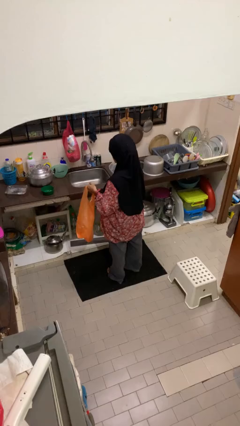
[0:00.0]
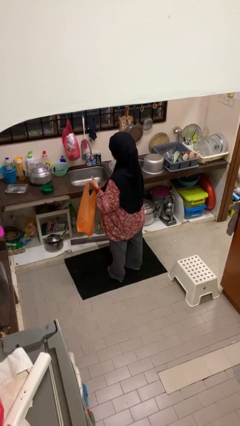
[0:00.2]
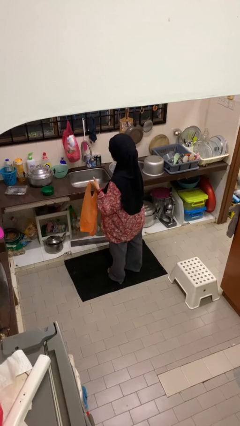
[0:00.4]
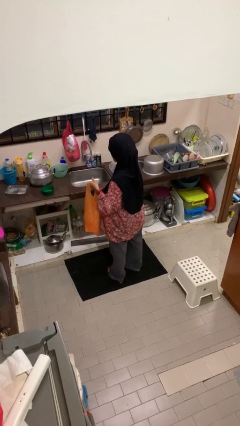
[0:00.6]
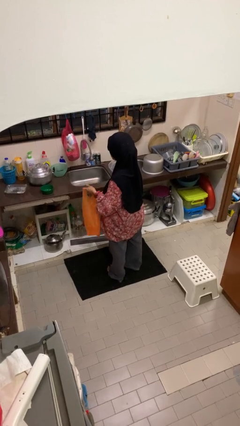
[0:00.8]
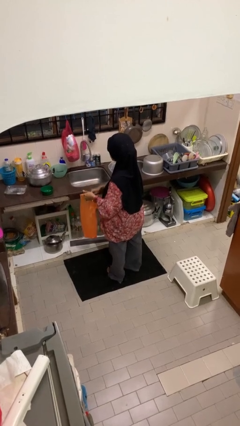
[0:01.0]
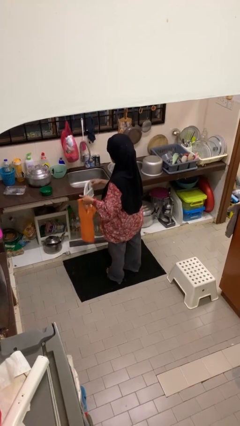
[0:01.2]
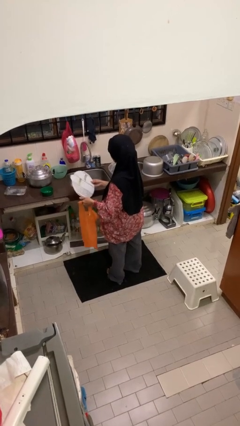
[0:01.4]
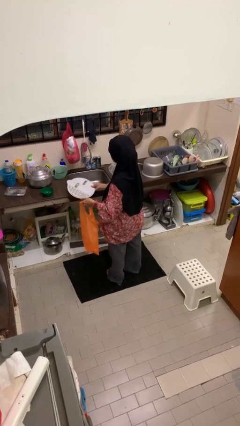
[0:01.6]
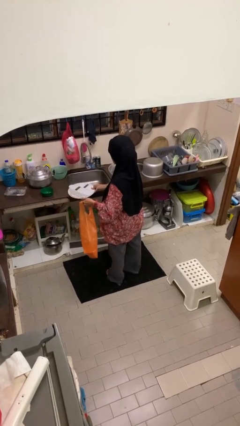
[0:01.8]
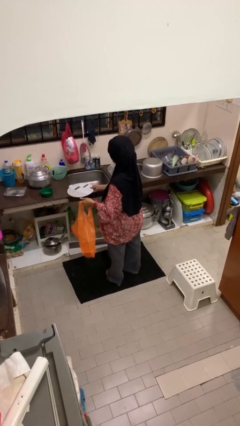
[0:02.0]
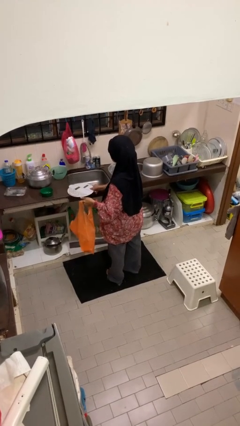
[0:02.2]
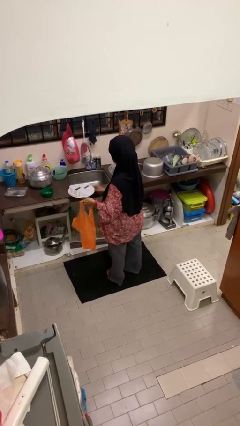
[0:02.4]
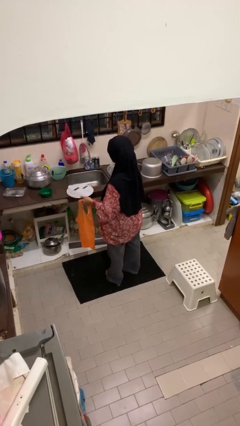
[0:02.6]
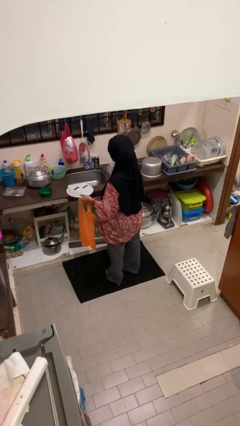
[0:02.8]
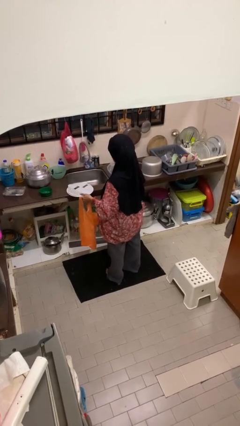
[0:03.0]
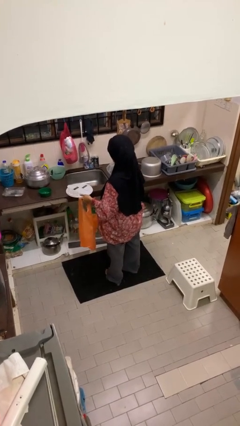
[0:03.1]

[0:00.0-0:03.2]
person takes object from bag

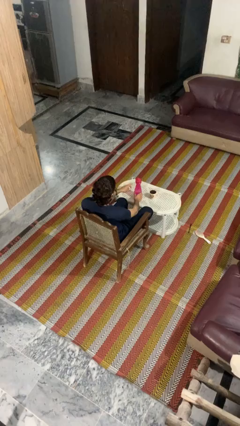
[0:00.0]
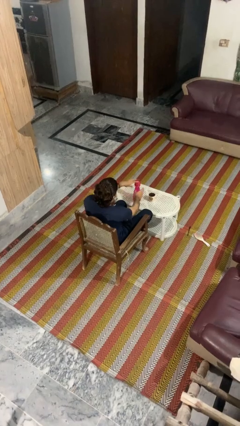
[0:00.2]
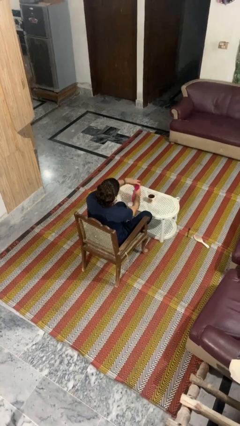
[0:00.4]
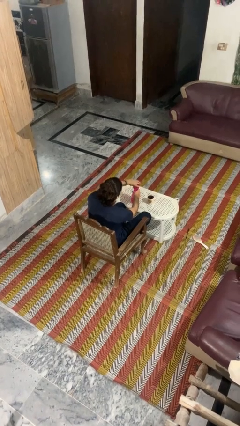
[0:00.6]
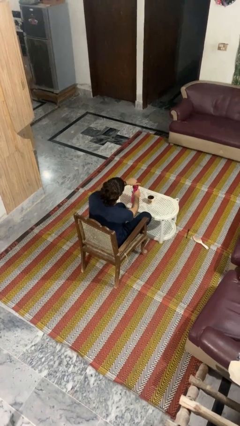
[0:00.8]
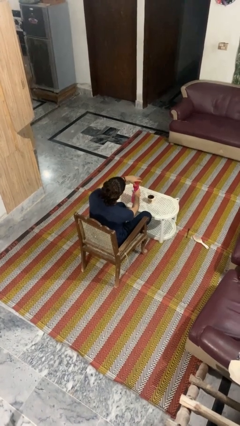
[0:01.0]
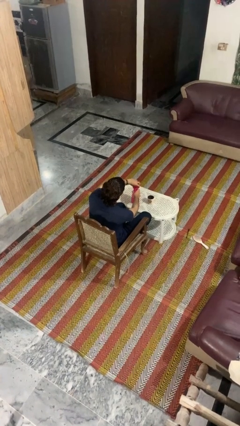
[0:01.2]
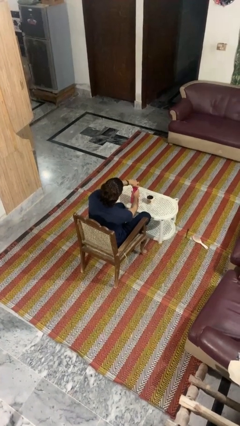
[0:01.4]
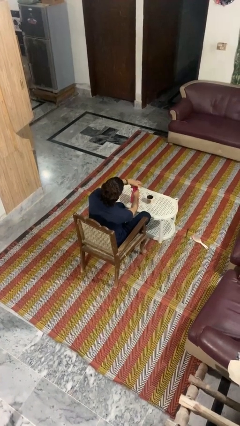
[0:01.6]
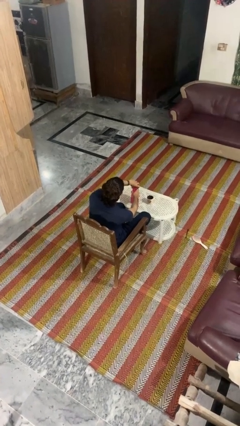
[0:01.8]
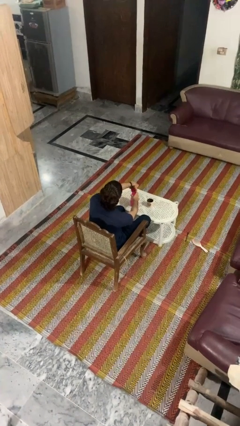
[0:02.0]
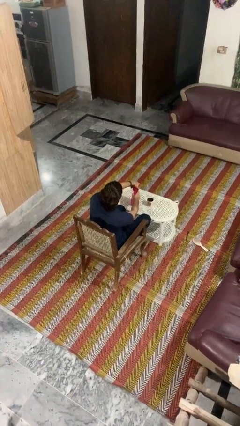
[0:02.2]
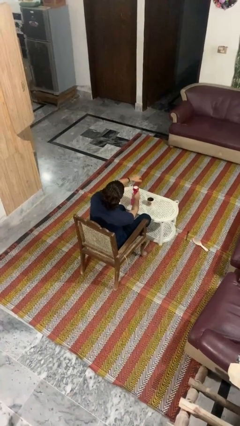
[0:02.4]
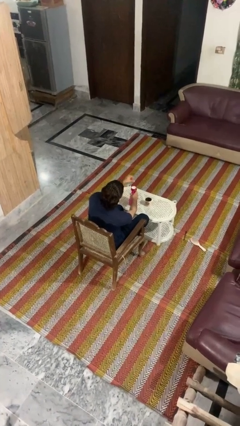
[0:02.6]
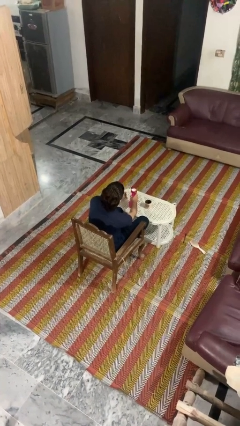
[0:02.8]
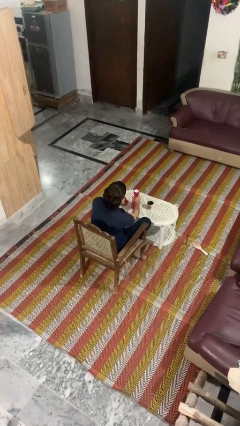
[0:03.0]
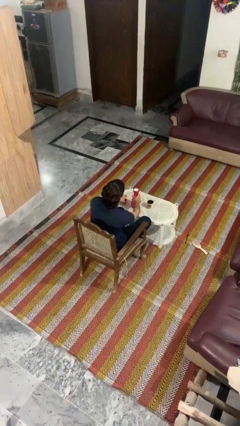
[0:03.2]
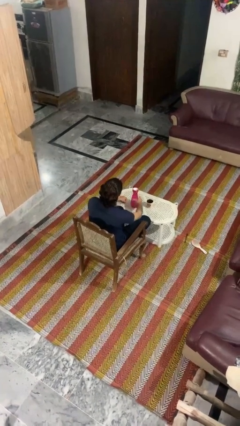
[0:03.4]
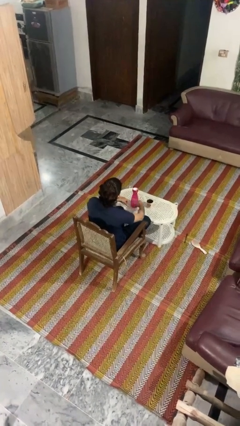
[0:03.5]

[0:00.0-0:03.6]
person unscrews lid from bottle

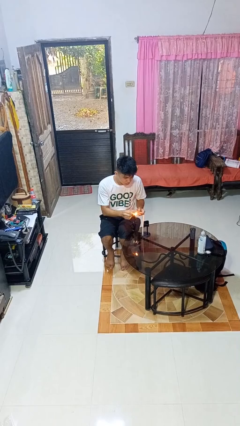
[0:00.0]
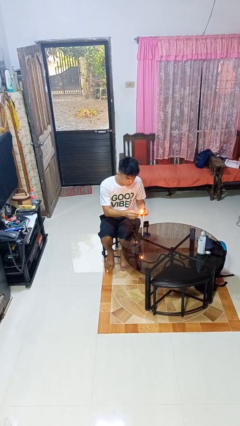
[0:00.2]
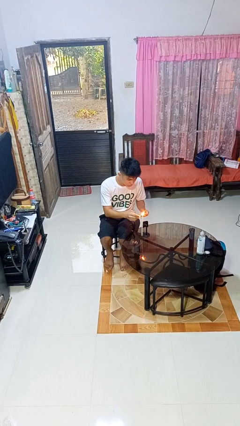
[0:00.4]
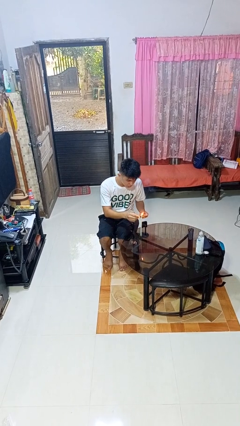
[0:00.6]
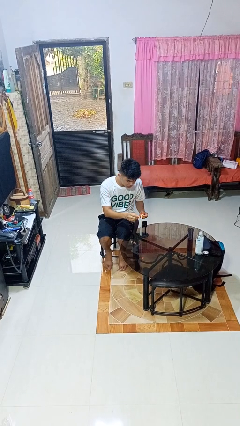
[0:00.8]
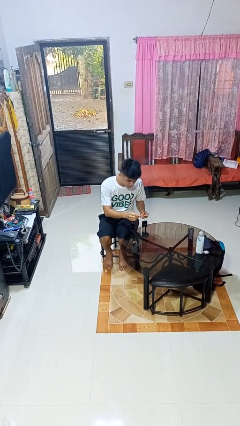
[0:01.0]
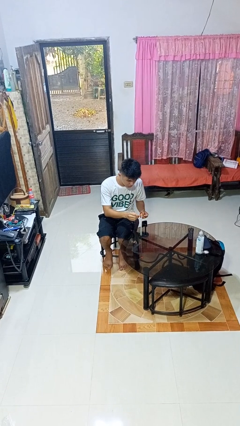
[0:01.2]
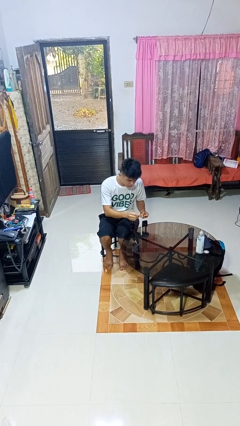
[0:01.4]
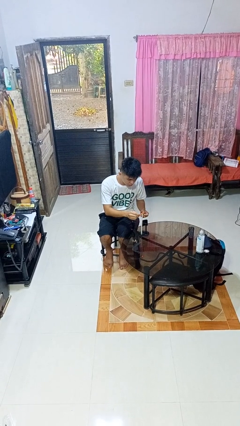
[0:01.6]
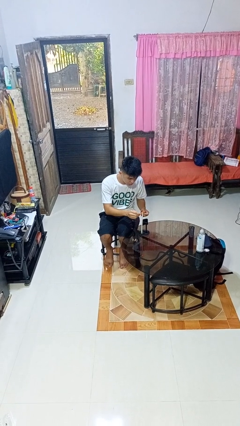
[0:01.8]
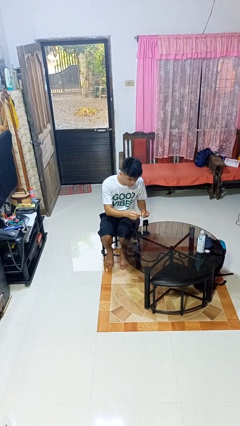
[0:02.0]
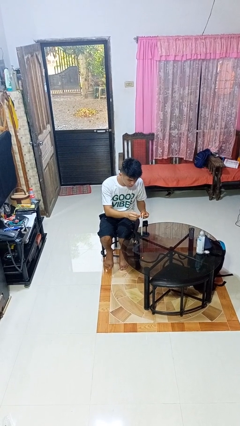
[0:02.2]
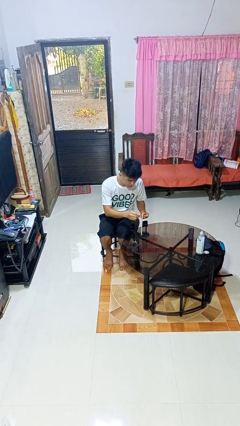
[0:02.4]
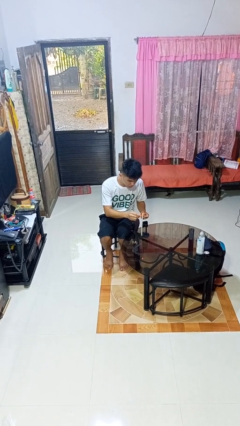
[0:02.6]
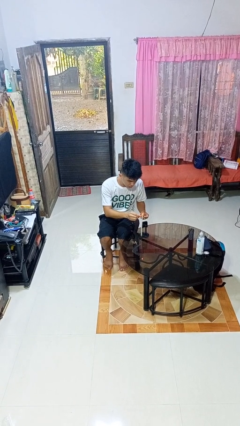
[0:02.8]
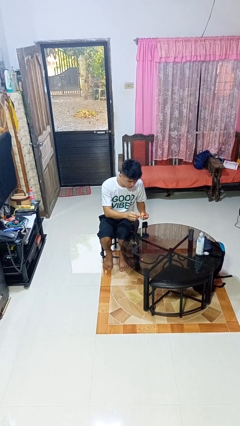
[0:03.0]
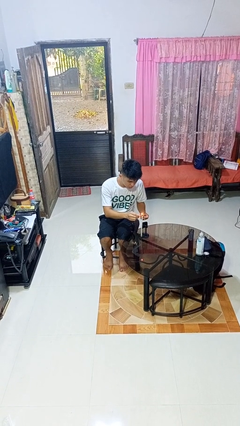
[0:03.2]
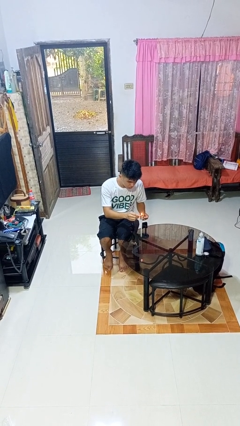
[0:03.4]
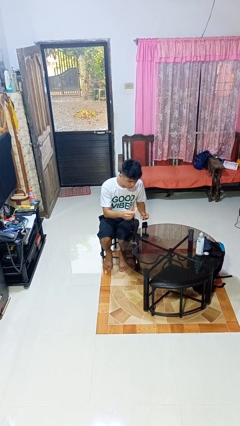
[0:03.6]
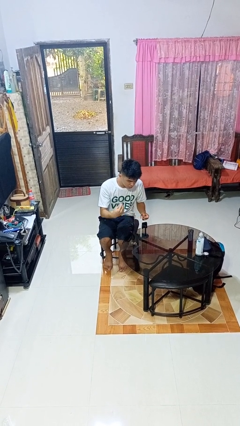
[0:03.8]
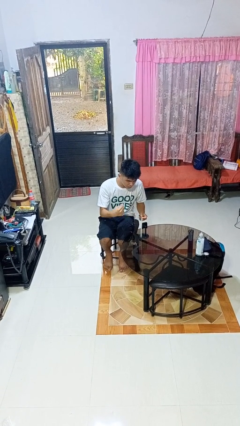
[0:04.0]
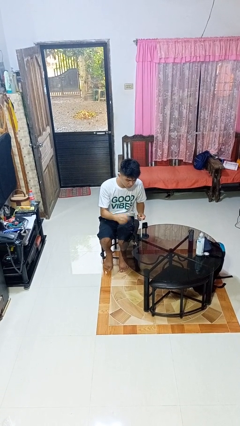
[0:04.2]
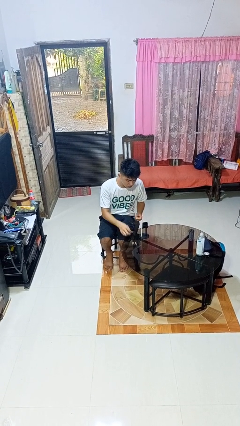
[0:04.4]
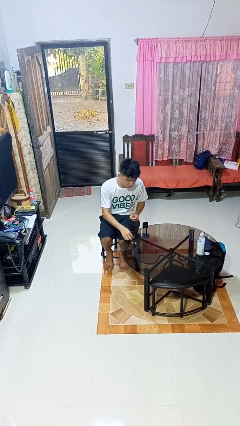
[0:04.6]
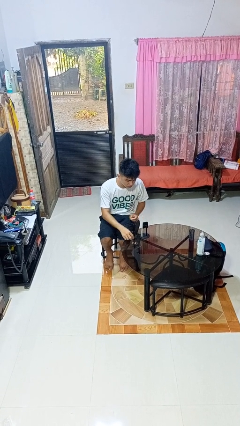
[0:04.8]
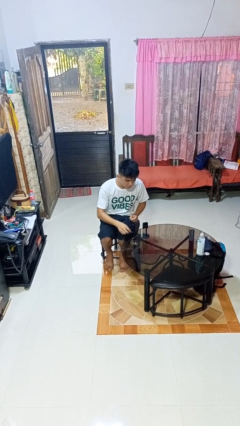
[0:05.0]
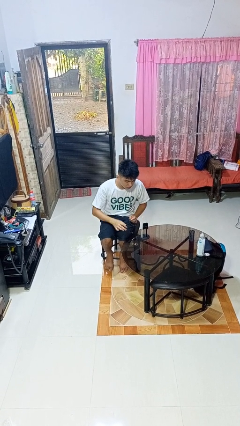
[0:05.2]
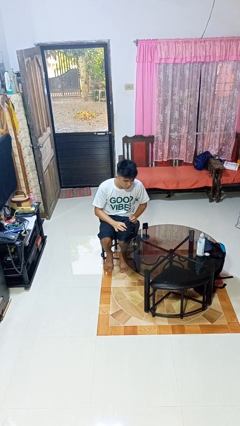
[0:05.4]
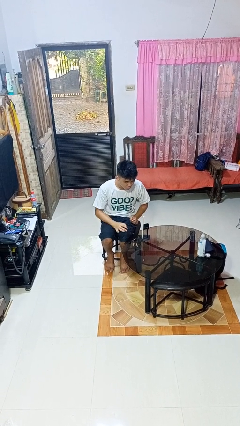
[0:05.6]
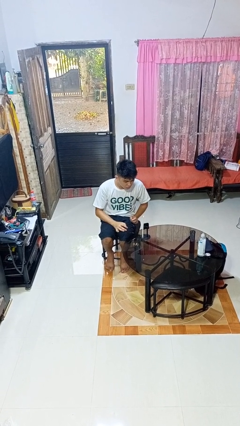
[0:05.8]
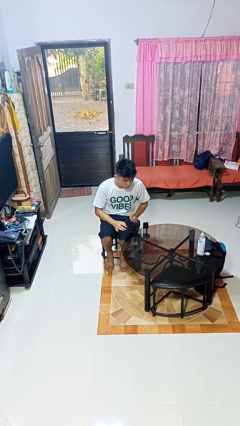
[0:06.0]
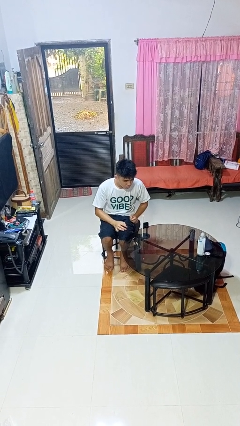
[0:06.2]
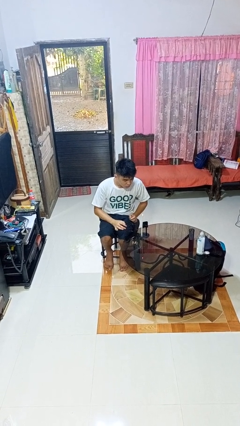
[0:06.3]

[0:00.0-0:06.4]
person lights candle

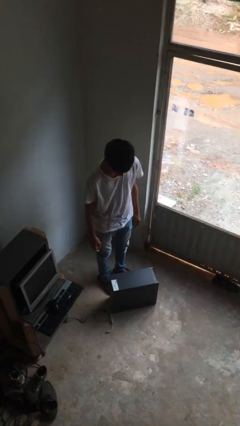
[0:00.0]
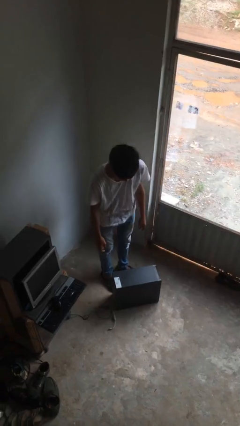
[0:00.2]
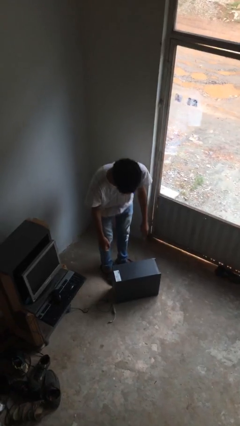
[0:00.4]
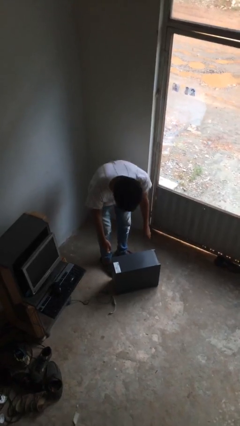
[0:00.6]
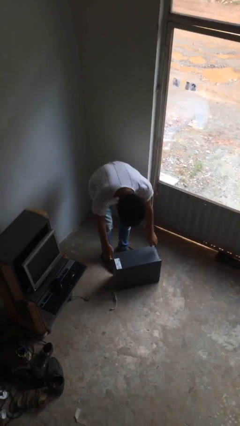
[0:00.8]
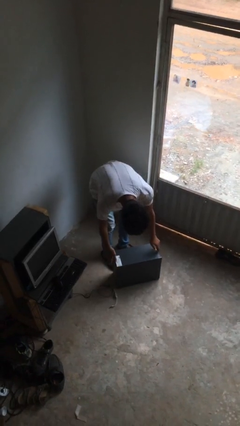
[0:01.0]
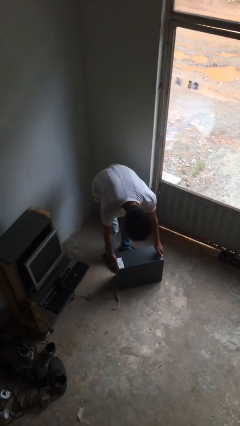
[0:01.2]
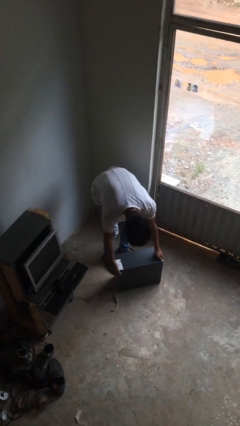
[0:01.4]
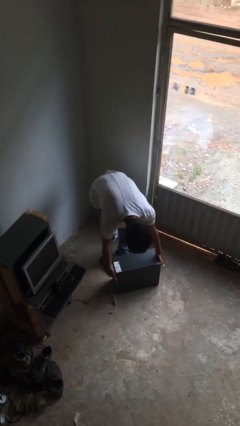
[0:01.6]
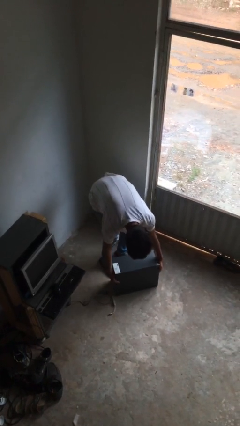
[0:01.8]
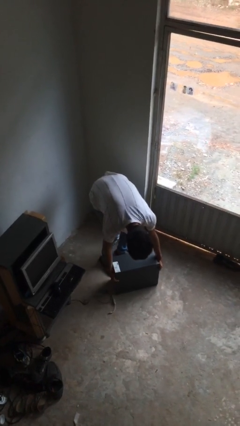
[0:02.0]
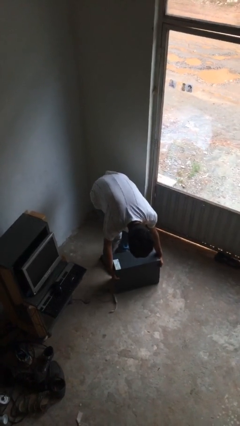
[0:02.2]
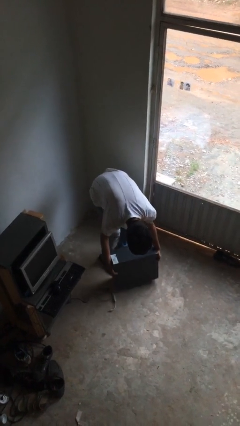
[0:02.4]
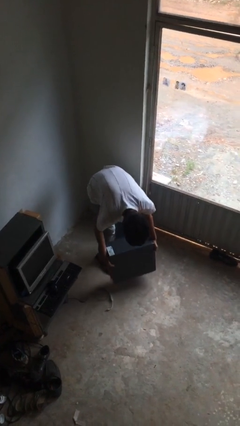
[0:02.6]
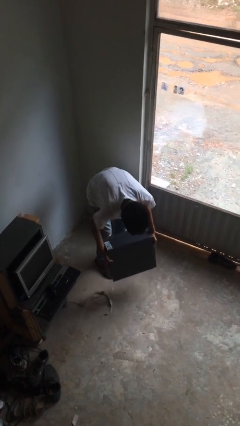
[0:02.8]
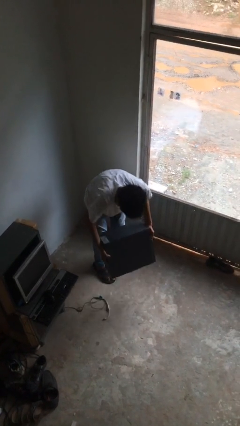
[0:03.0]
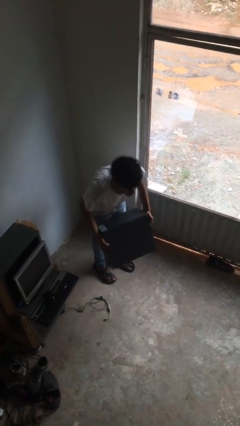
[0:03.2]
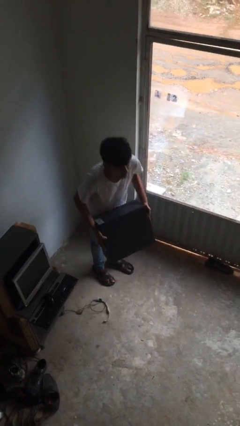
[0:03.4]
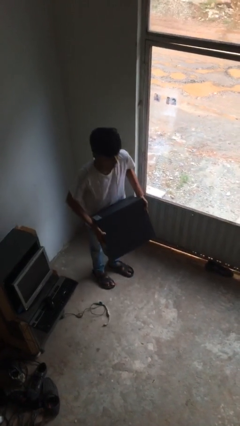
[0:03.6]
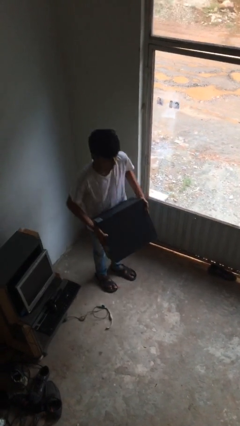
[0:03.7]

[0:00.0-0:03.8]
person picks up object from floor

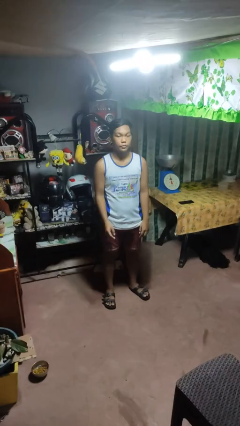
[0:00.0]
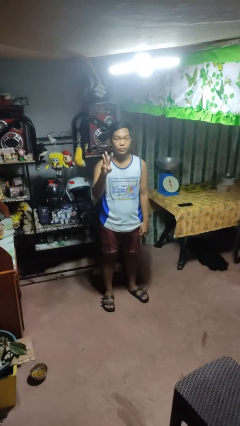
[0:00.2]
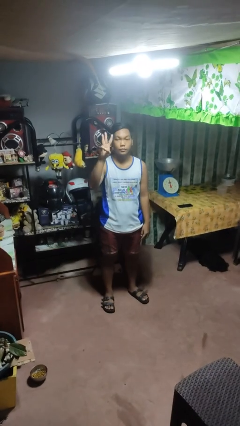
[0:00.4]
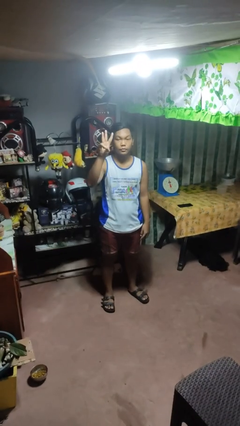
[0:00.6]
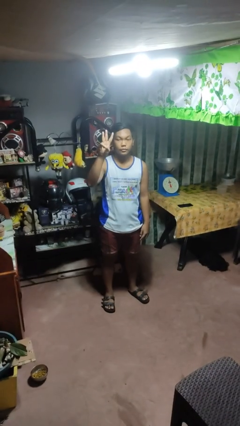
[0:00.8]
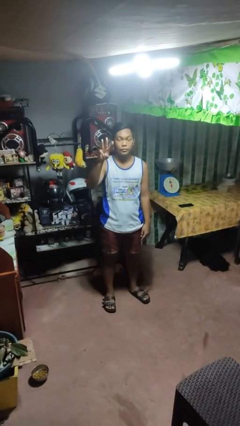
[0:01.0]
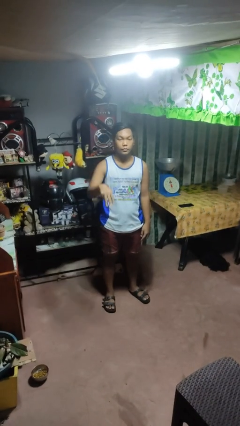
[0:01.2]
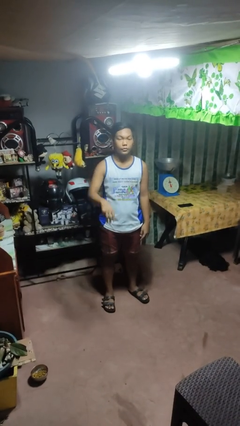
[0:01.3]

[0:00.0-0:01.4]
person gestures number three
